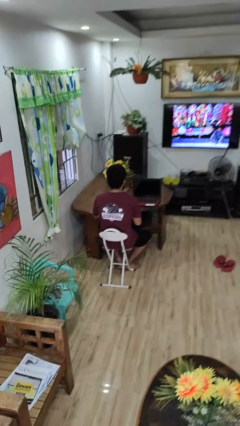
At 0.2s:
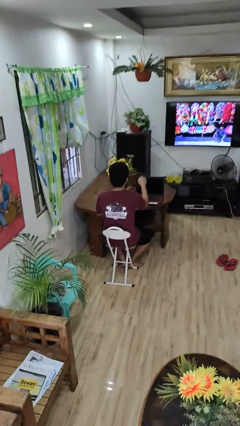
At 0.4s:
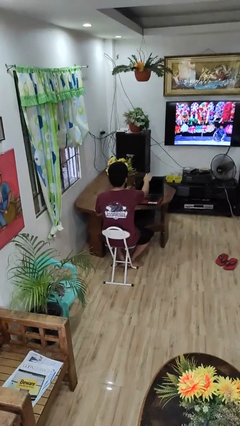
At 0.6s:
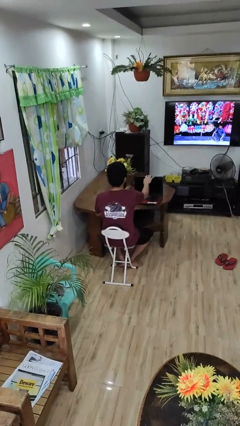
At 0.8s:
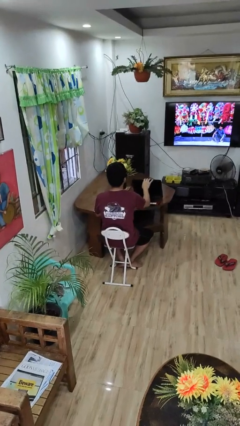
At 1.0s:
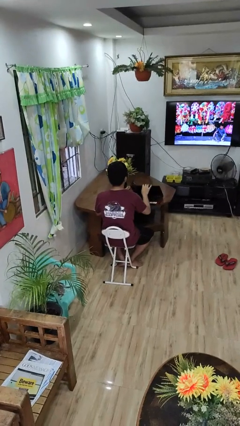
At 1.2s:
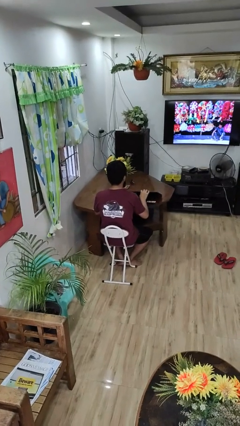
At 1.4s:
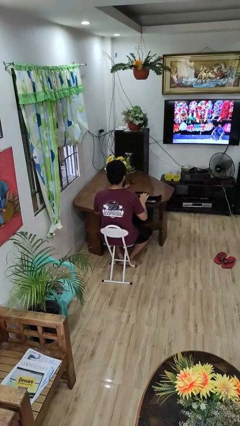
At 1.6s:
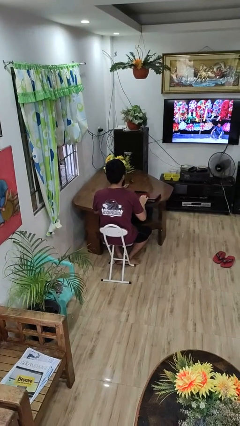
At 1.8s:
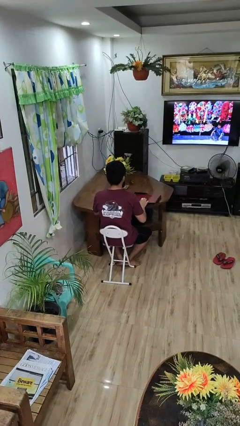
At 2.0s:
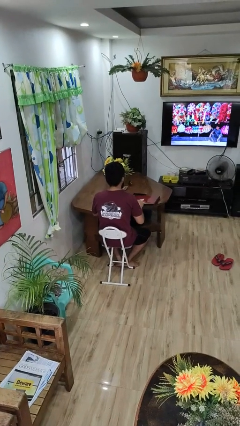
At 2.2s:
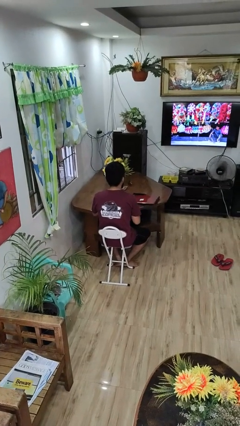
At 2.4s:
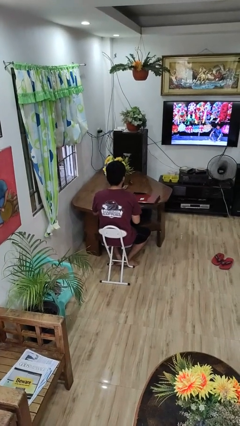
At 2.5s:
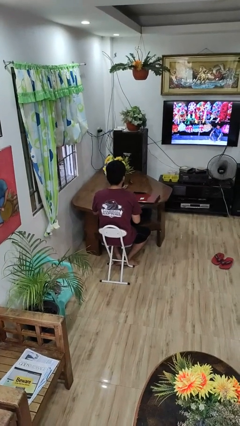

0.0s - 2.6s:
person closes laptop

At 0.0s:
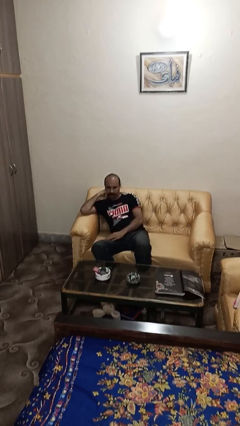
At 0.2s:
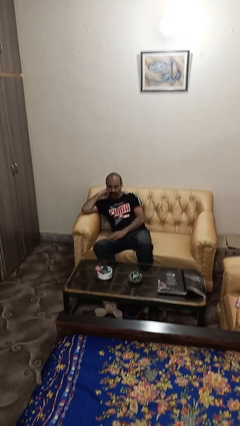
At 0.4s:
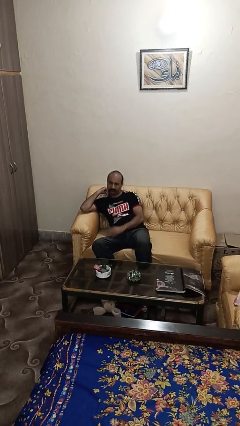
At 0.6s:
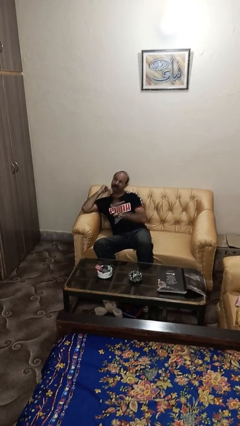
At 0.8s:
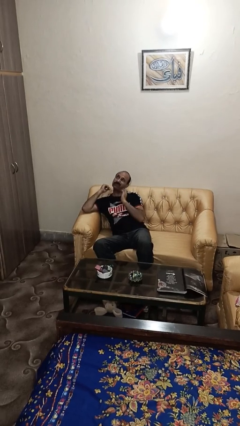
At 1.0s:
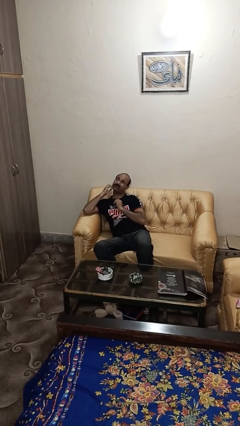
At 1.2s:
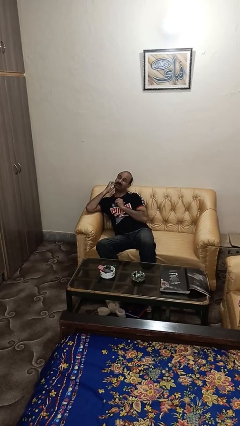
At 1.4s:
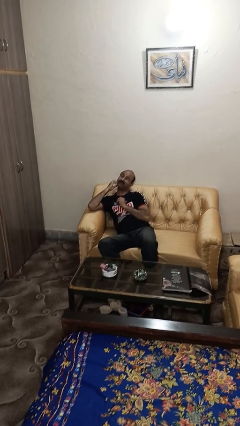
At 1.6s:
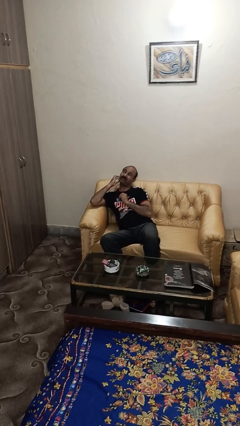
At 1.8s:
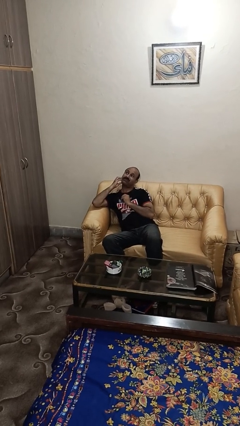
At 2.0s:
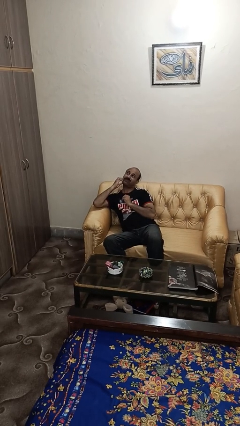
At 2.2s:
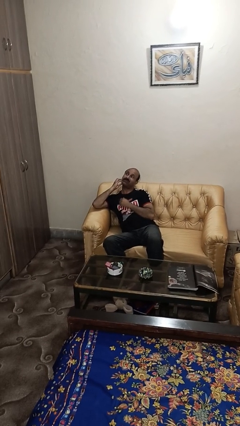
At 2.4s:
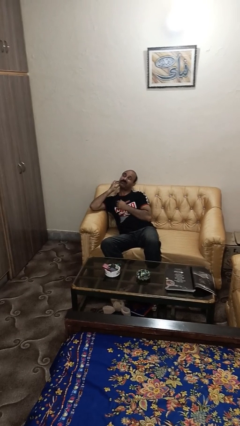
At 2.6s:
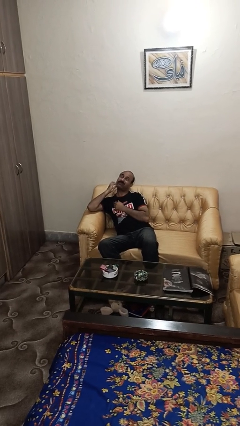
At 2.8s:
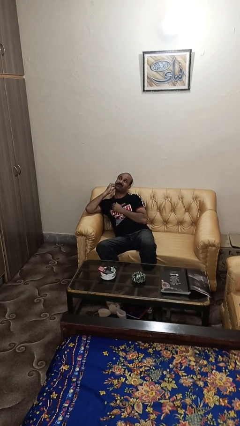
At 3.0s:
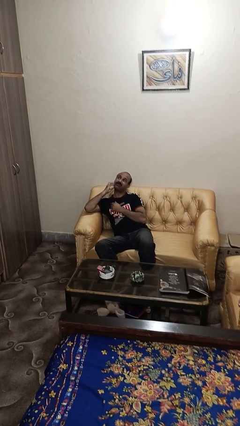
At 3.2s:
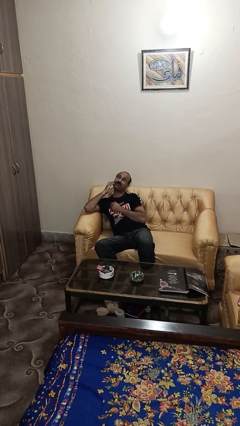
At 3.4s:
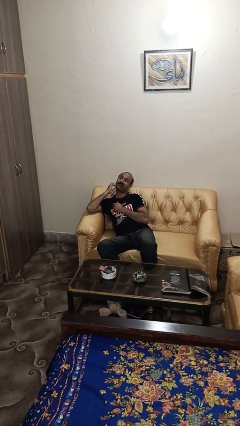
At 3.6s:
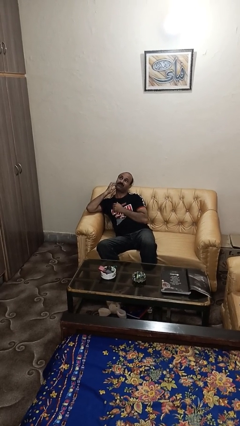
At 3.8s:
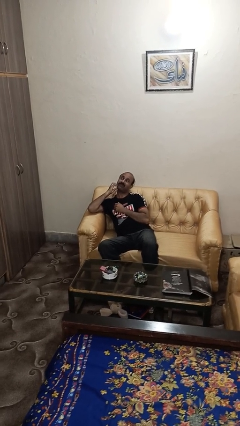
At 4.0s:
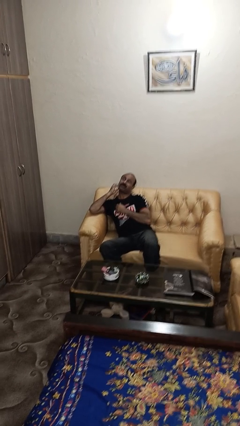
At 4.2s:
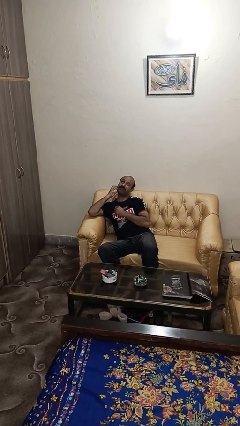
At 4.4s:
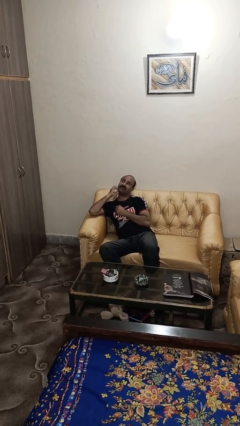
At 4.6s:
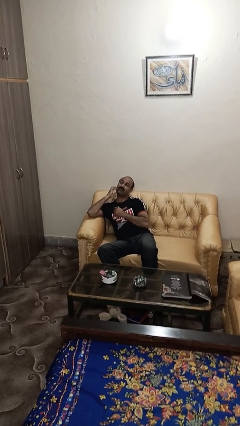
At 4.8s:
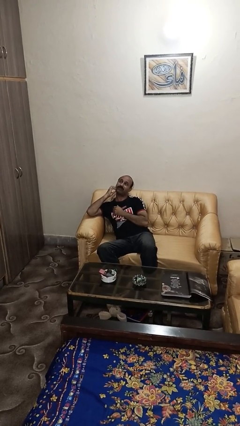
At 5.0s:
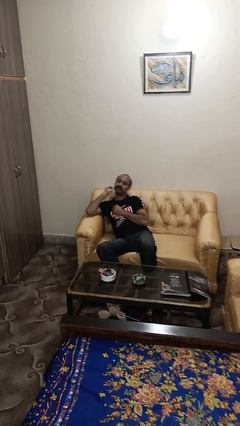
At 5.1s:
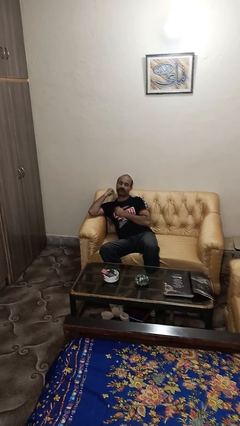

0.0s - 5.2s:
person strokes chin

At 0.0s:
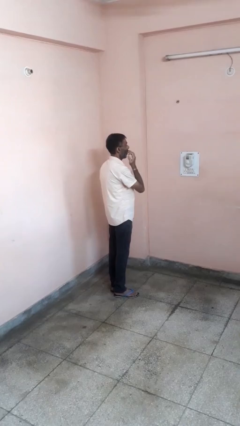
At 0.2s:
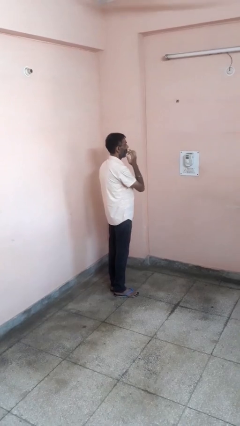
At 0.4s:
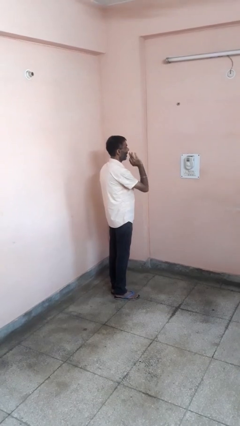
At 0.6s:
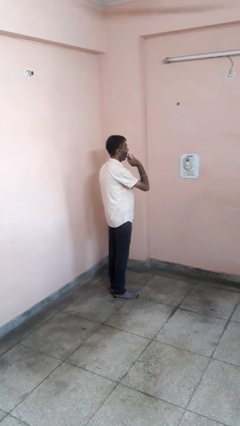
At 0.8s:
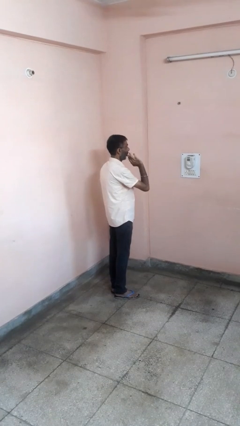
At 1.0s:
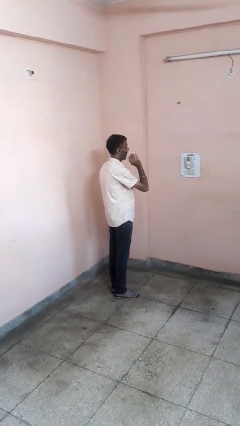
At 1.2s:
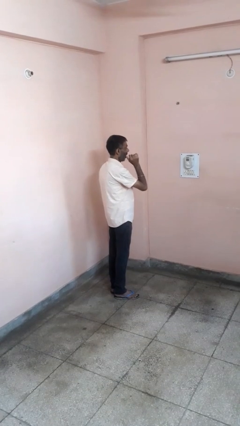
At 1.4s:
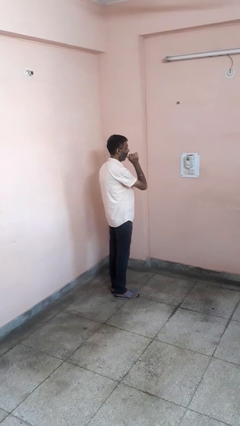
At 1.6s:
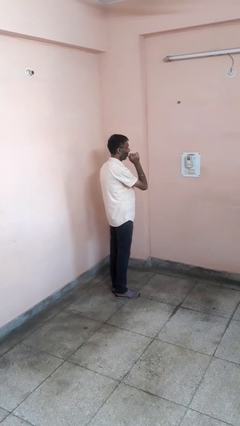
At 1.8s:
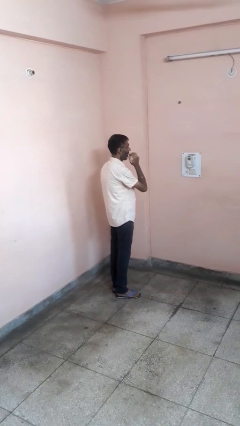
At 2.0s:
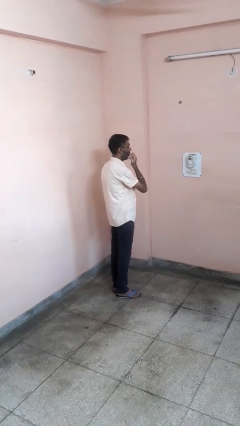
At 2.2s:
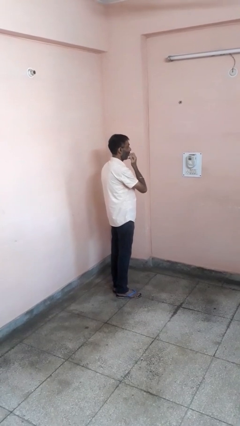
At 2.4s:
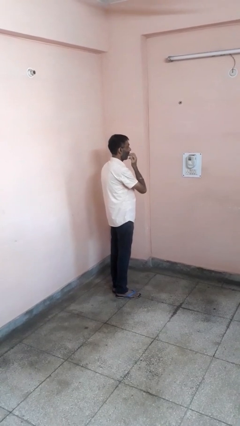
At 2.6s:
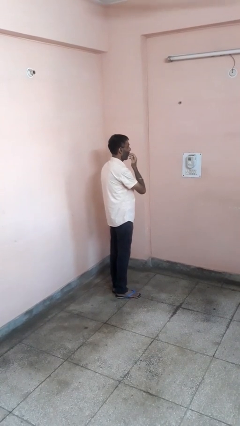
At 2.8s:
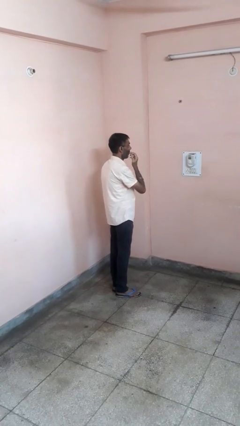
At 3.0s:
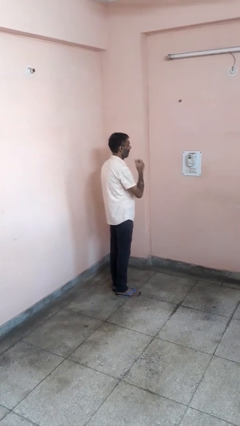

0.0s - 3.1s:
person licks fingers

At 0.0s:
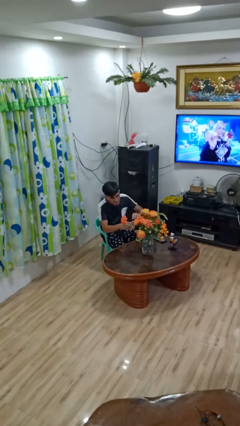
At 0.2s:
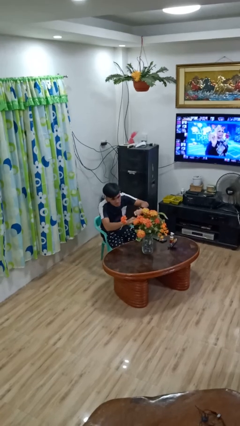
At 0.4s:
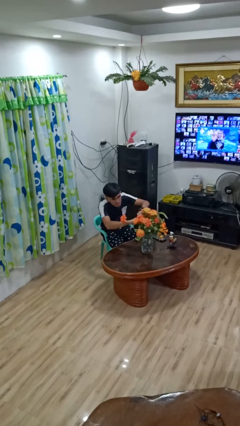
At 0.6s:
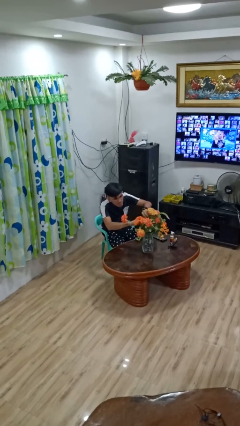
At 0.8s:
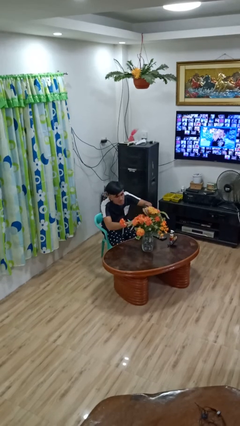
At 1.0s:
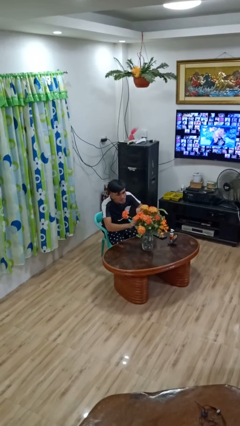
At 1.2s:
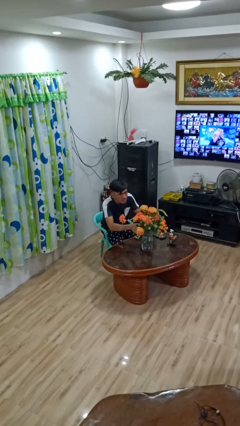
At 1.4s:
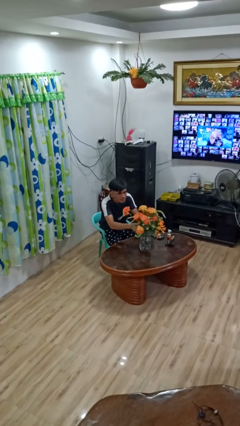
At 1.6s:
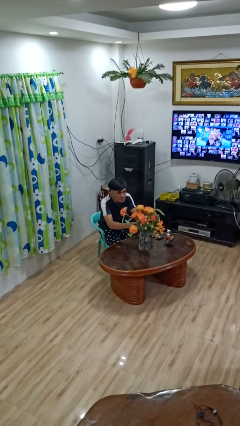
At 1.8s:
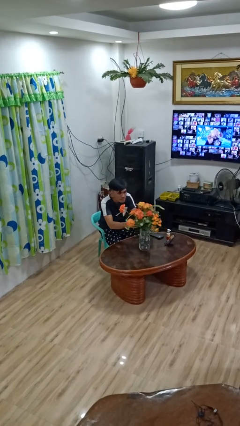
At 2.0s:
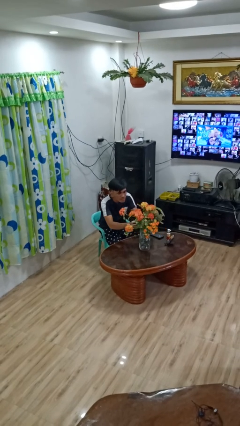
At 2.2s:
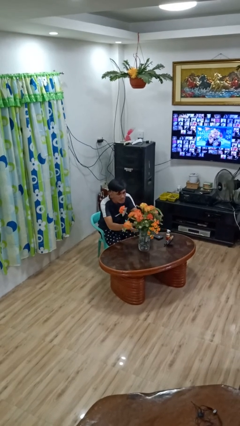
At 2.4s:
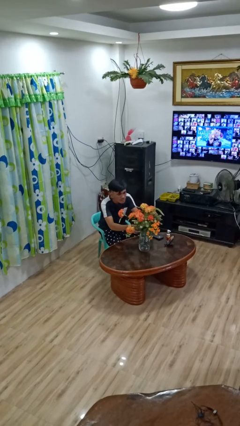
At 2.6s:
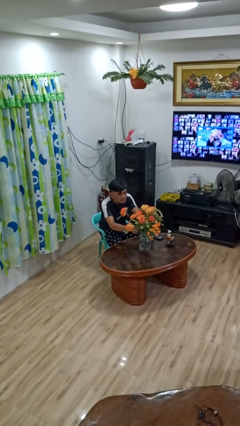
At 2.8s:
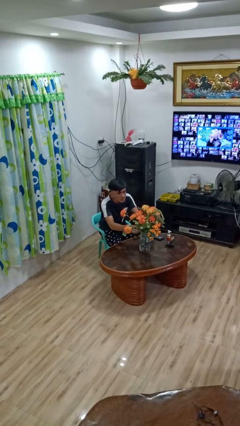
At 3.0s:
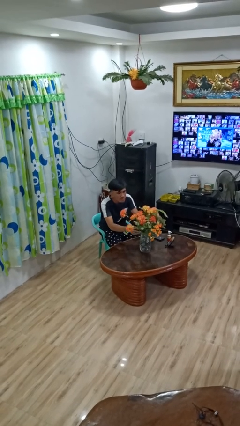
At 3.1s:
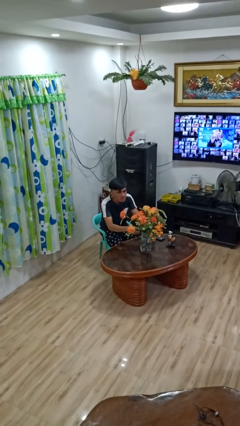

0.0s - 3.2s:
person arranges flowers in vase

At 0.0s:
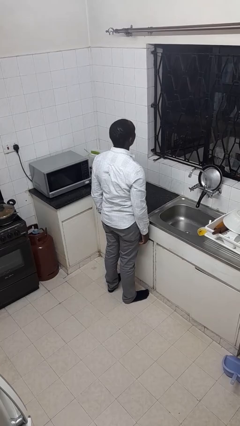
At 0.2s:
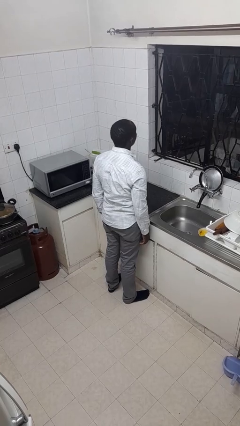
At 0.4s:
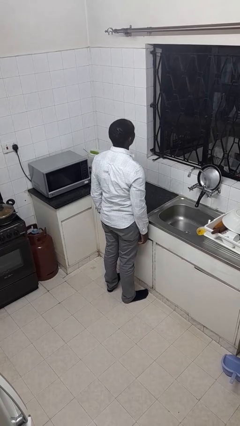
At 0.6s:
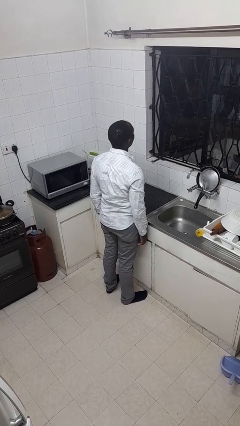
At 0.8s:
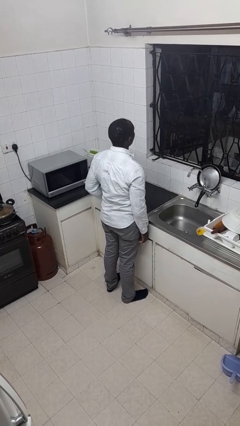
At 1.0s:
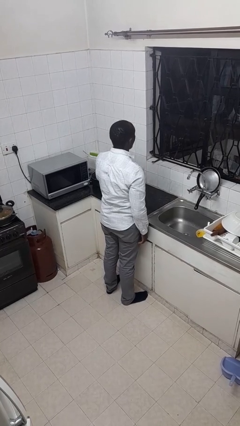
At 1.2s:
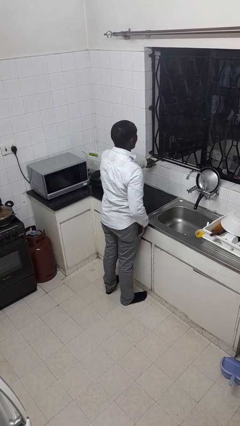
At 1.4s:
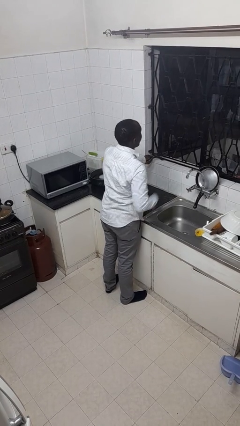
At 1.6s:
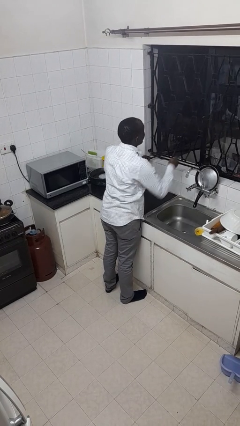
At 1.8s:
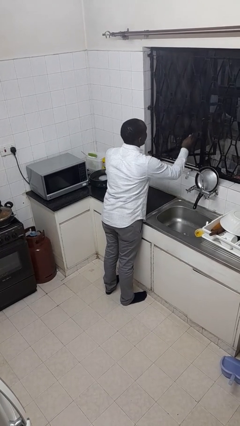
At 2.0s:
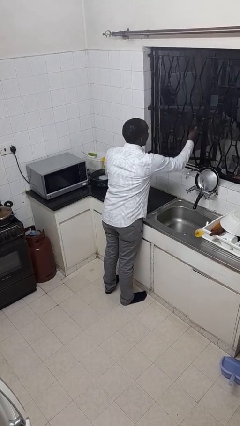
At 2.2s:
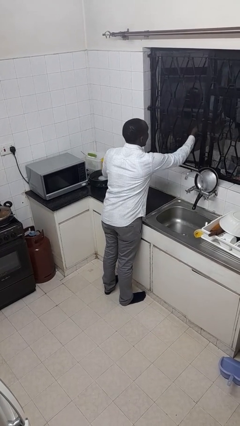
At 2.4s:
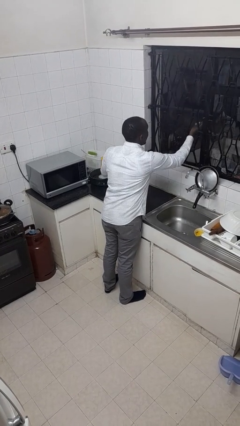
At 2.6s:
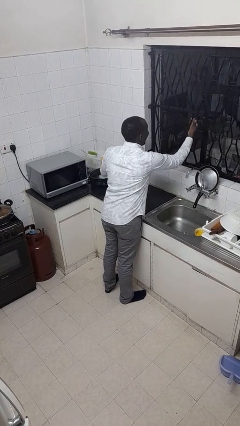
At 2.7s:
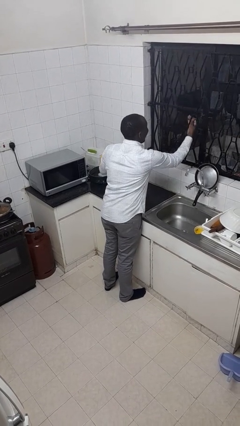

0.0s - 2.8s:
person closes home window

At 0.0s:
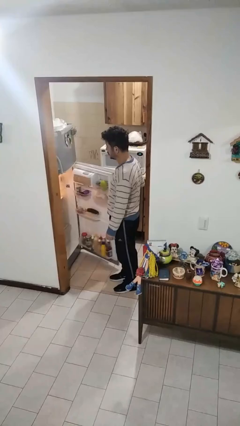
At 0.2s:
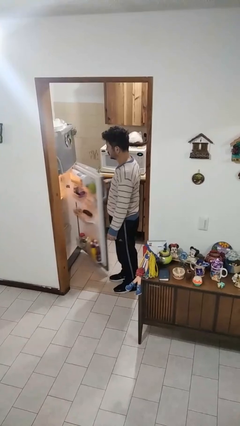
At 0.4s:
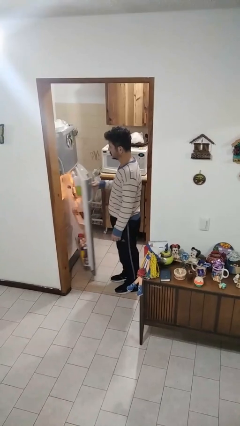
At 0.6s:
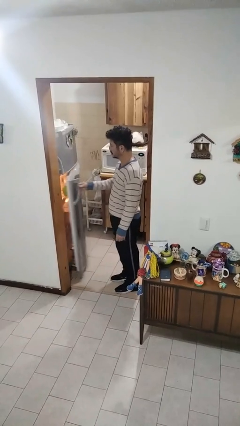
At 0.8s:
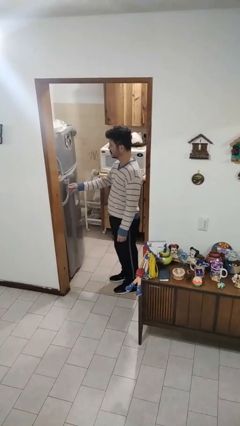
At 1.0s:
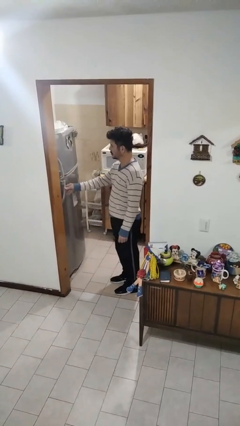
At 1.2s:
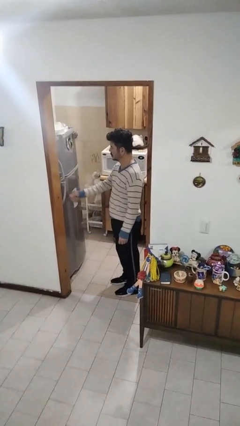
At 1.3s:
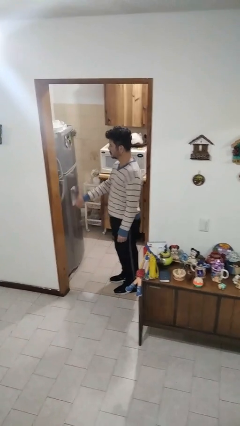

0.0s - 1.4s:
person closes refrigerator
